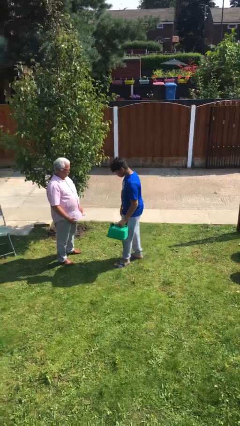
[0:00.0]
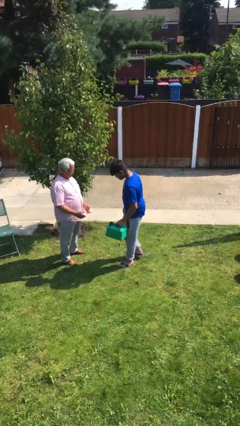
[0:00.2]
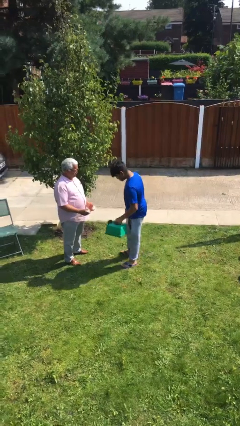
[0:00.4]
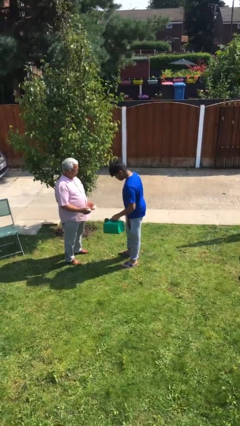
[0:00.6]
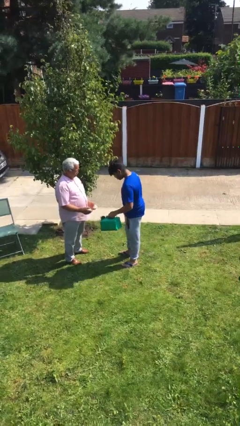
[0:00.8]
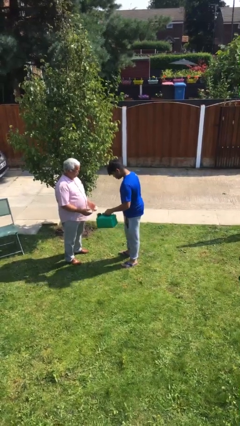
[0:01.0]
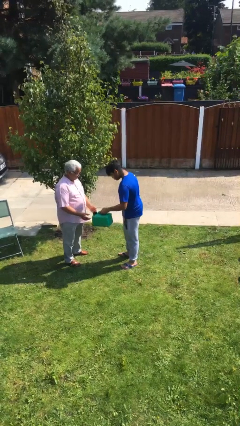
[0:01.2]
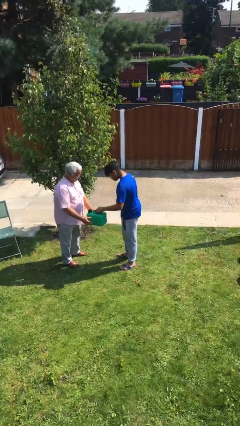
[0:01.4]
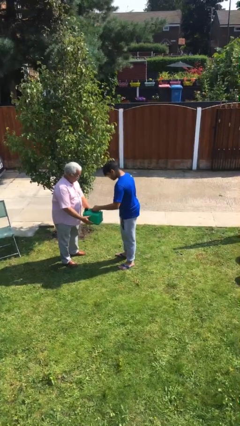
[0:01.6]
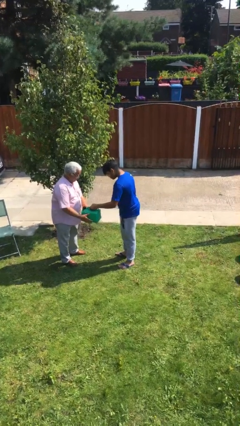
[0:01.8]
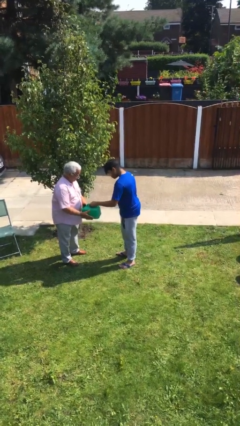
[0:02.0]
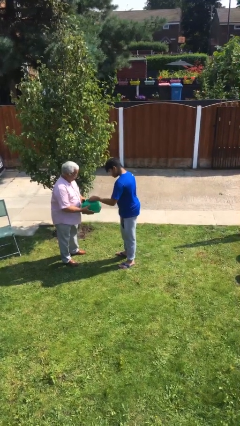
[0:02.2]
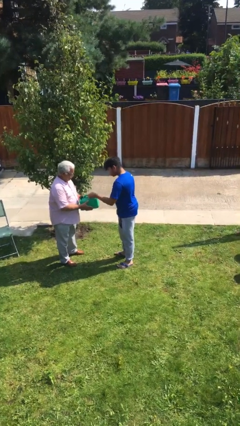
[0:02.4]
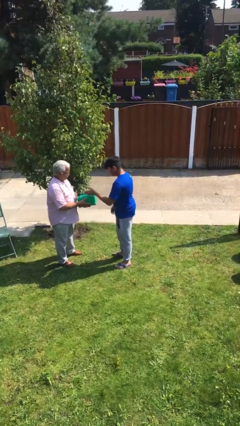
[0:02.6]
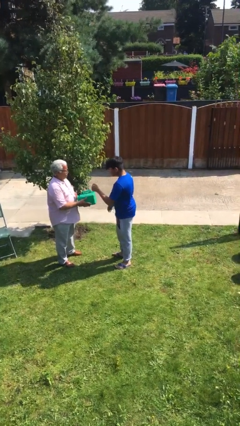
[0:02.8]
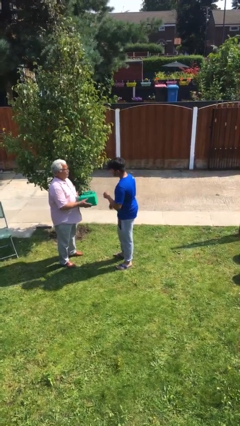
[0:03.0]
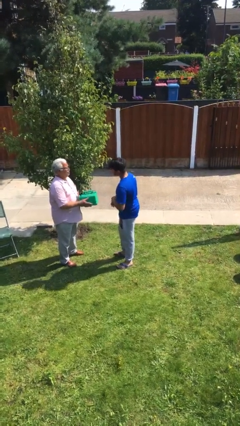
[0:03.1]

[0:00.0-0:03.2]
person transfers object to person

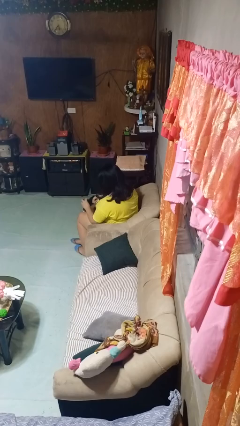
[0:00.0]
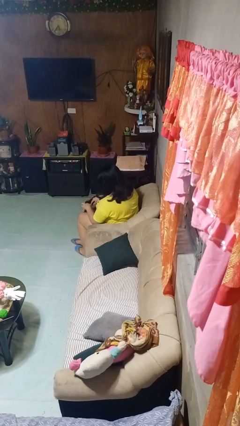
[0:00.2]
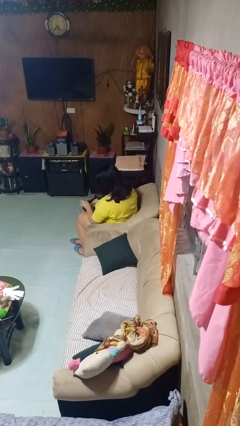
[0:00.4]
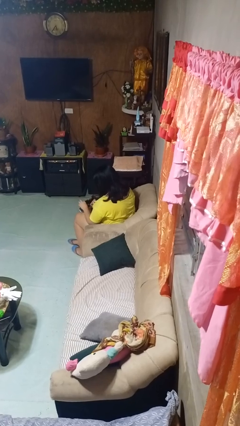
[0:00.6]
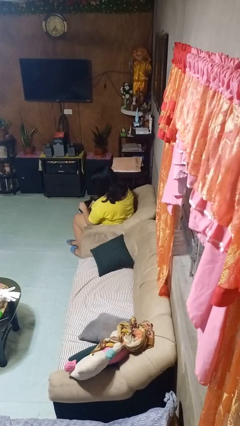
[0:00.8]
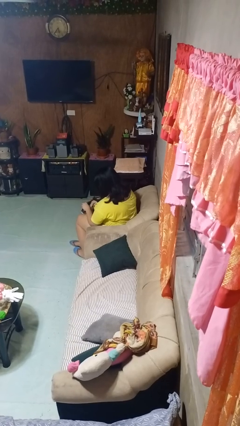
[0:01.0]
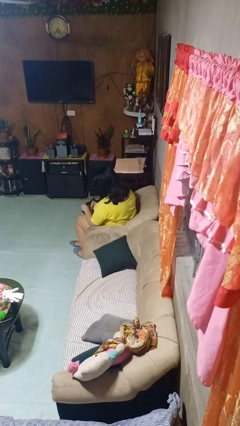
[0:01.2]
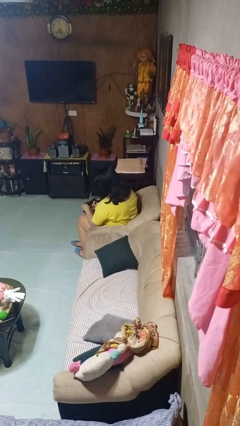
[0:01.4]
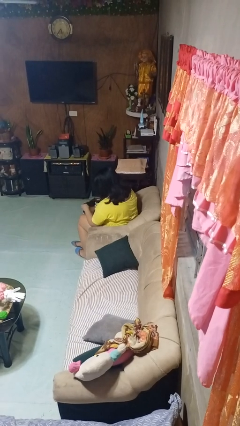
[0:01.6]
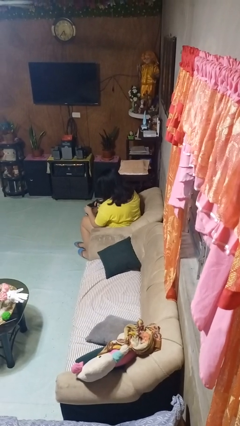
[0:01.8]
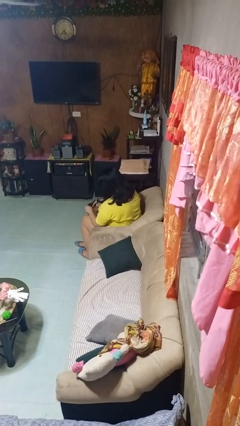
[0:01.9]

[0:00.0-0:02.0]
person searches in purse

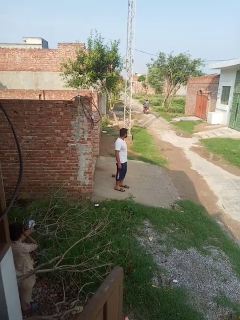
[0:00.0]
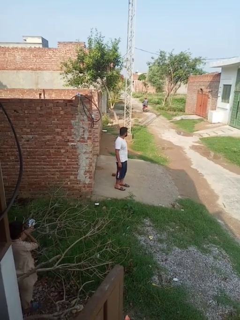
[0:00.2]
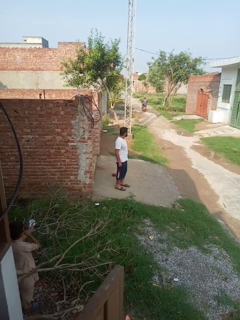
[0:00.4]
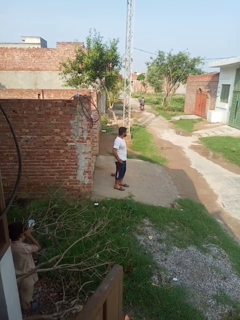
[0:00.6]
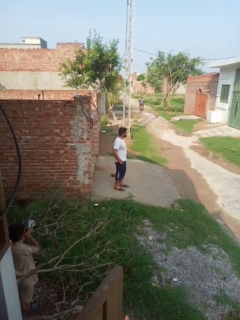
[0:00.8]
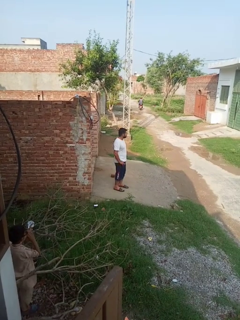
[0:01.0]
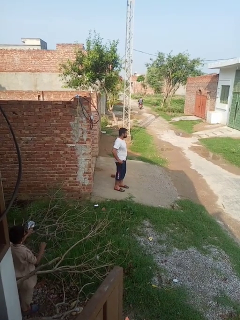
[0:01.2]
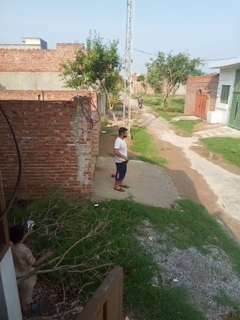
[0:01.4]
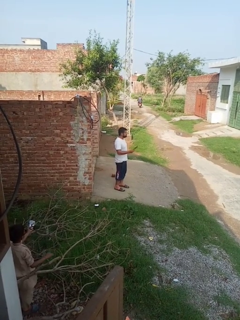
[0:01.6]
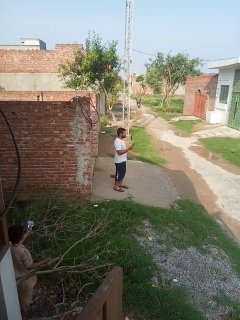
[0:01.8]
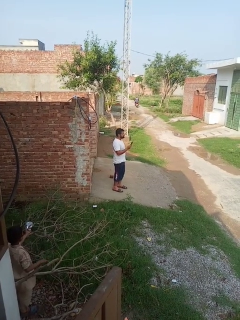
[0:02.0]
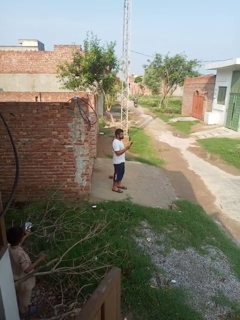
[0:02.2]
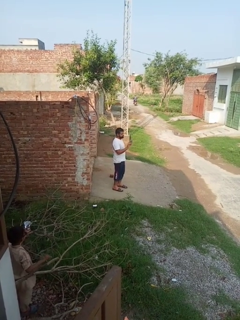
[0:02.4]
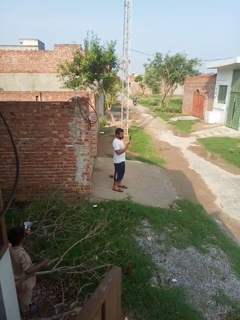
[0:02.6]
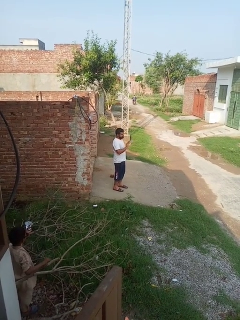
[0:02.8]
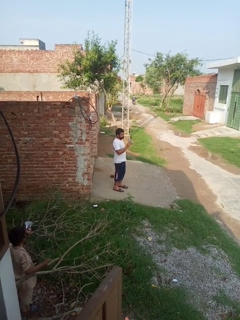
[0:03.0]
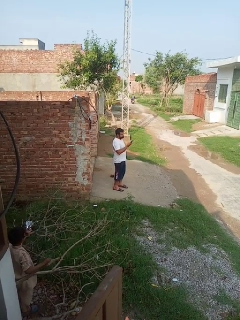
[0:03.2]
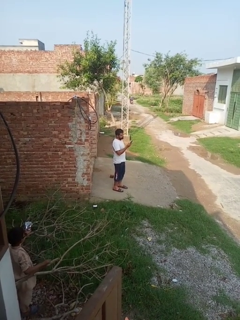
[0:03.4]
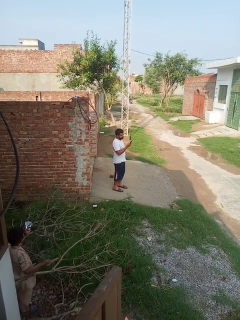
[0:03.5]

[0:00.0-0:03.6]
person takes phone from pocket

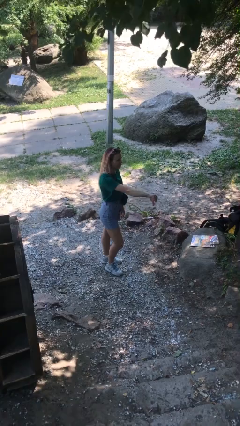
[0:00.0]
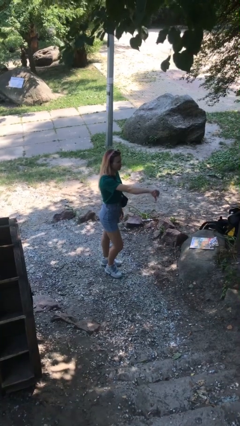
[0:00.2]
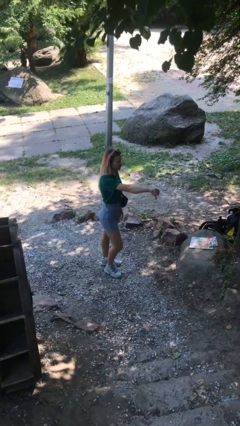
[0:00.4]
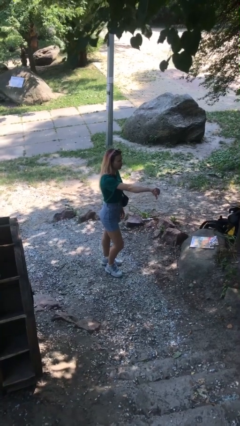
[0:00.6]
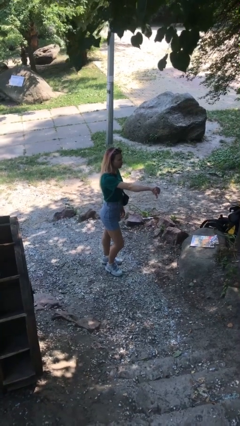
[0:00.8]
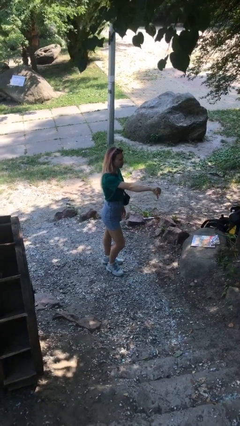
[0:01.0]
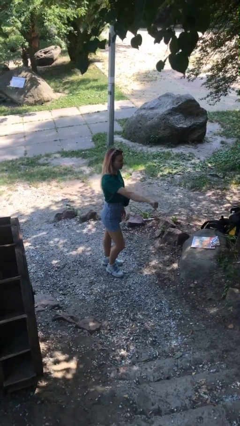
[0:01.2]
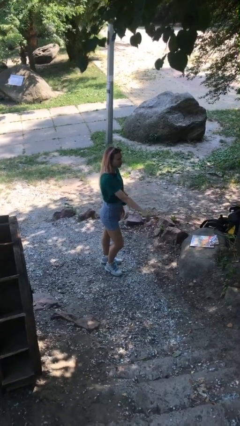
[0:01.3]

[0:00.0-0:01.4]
person gestures thumbs down

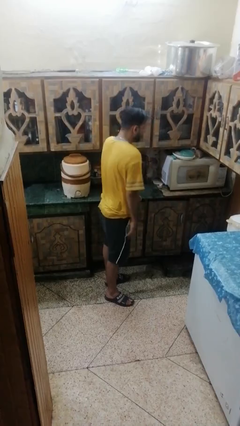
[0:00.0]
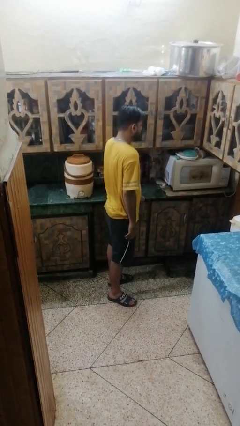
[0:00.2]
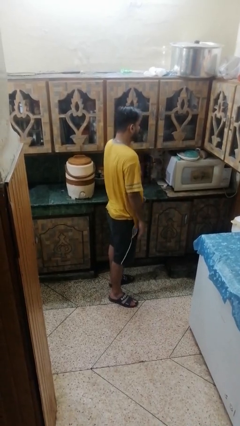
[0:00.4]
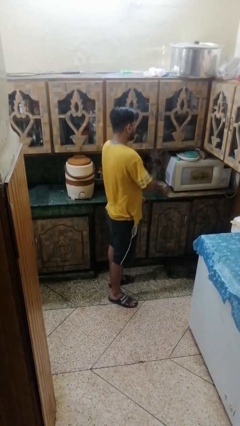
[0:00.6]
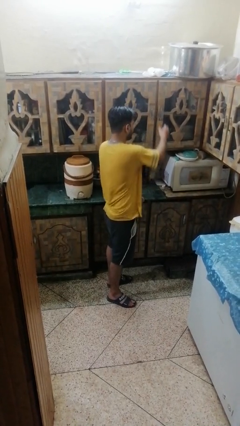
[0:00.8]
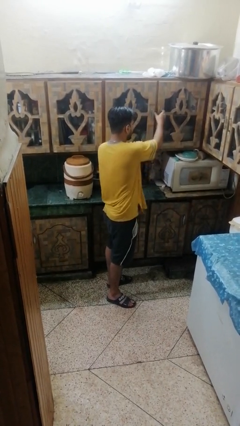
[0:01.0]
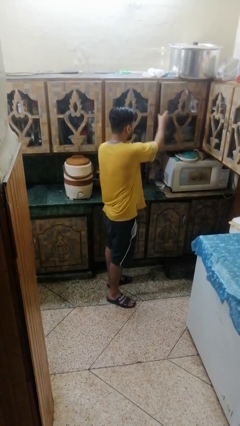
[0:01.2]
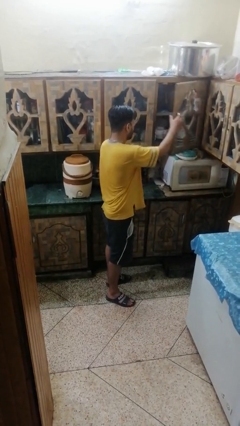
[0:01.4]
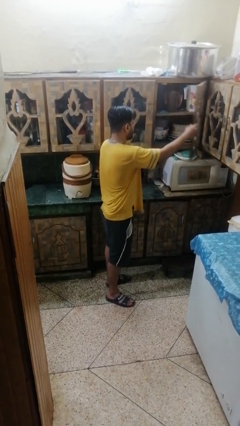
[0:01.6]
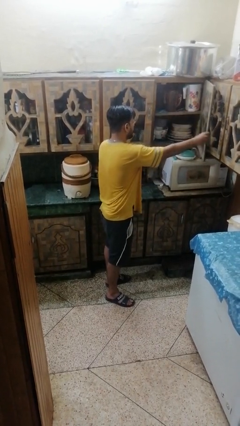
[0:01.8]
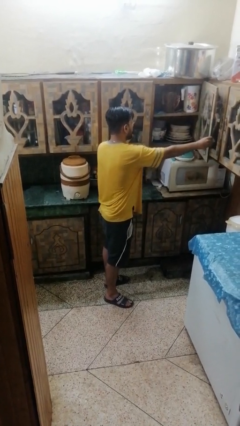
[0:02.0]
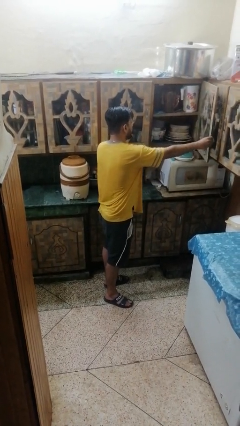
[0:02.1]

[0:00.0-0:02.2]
person closes cabinet

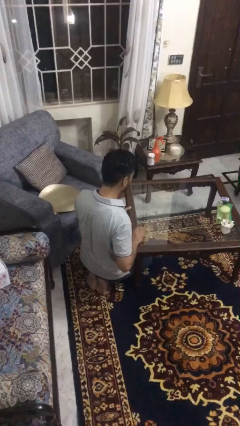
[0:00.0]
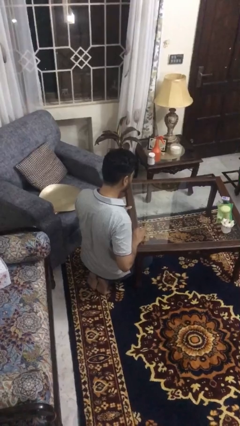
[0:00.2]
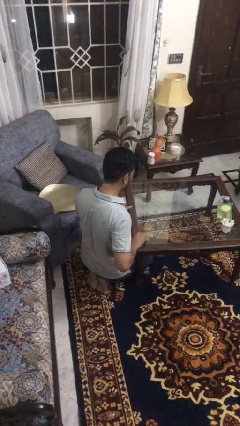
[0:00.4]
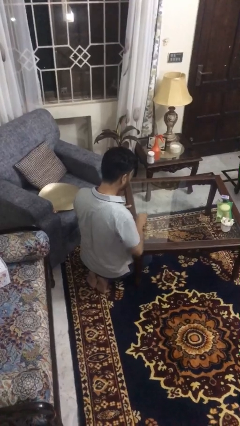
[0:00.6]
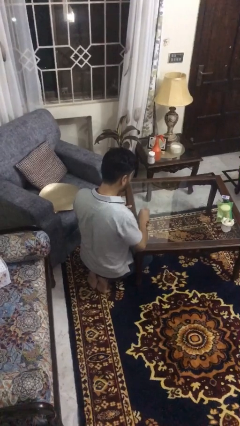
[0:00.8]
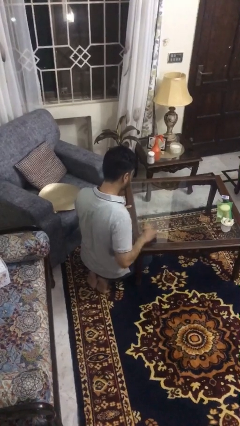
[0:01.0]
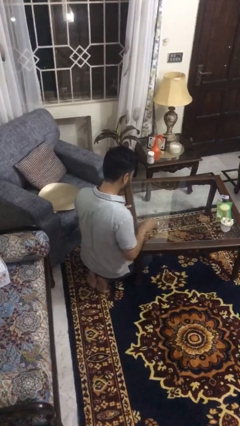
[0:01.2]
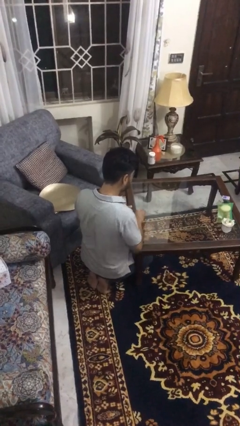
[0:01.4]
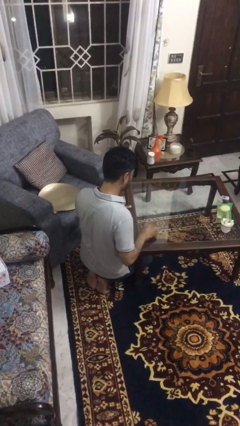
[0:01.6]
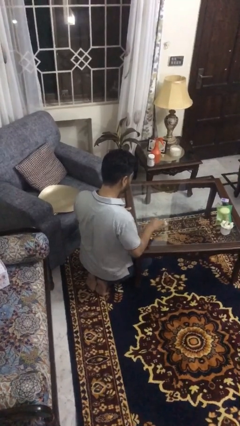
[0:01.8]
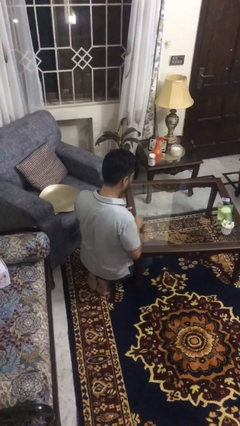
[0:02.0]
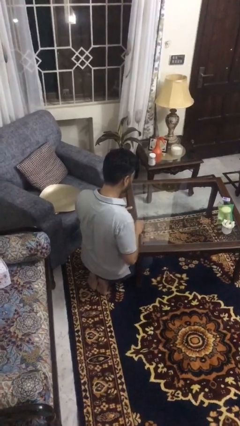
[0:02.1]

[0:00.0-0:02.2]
person cleans table with rag

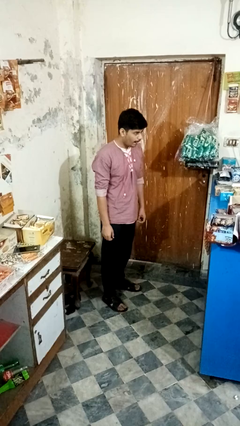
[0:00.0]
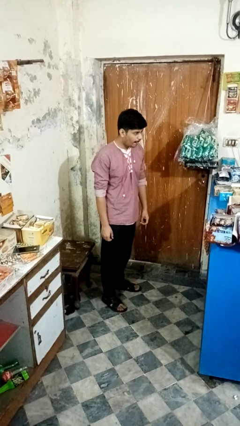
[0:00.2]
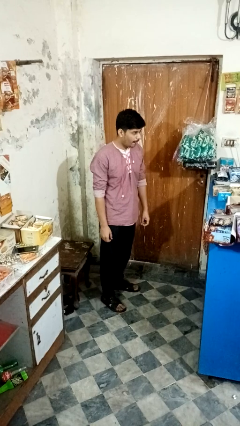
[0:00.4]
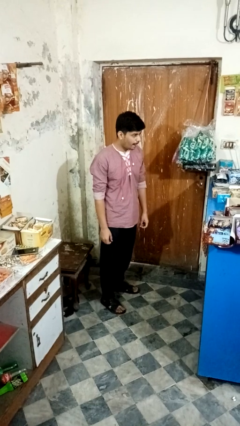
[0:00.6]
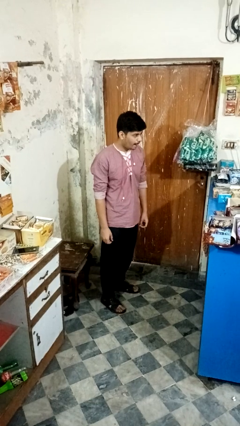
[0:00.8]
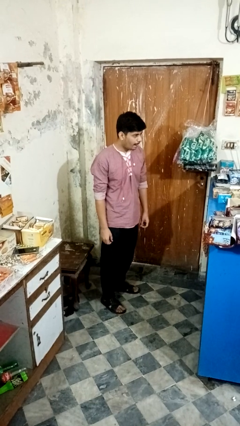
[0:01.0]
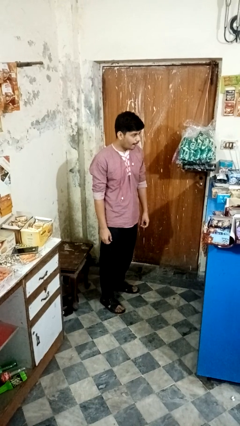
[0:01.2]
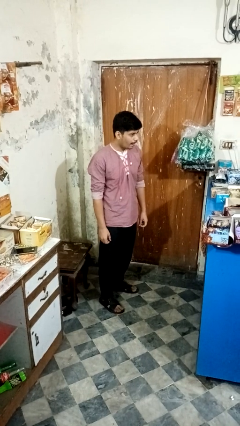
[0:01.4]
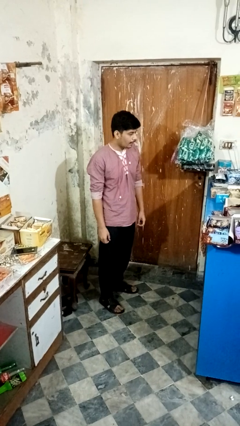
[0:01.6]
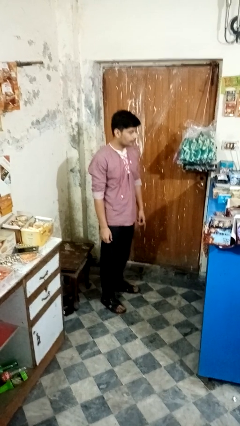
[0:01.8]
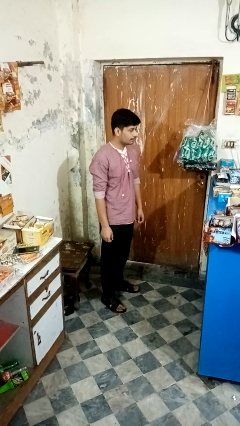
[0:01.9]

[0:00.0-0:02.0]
person sticks out tongue

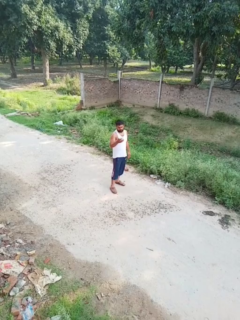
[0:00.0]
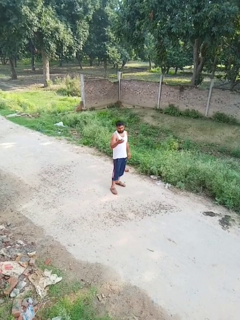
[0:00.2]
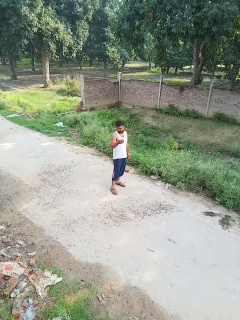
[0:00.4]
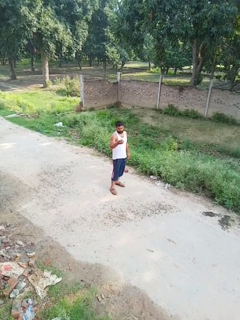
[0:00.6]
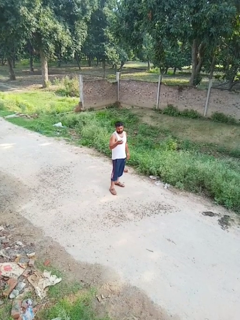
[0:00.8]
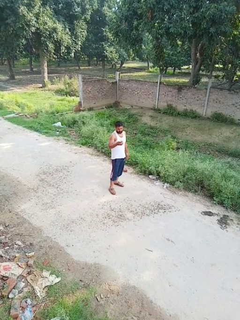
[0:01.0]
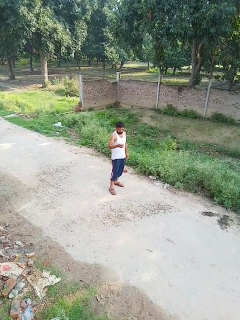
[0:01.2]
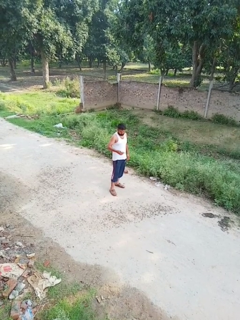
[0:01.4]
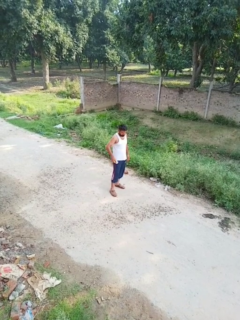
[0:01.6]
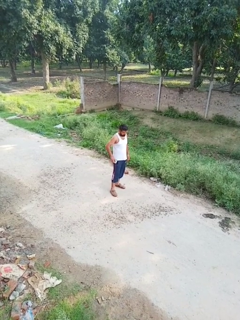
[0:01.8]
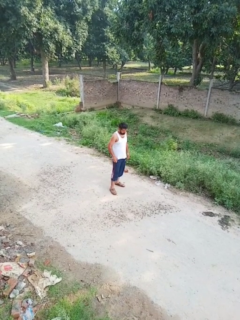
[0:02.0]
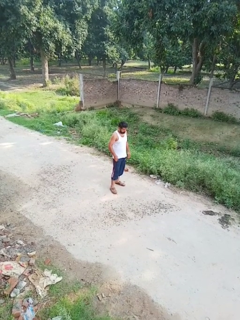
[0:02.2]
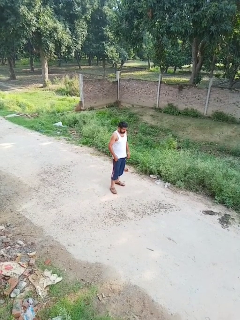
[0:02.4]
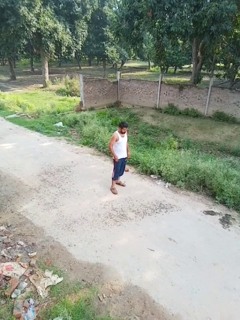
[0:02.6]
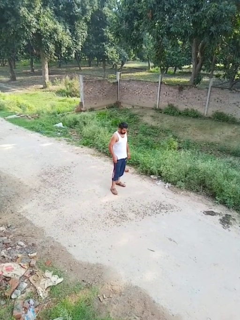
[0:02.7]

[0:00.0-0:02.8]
person puts phone into pocket
